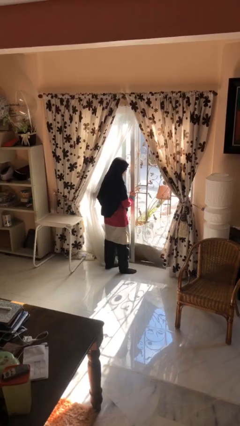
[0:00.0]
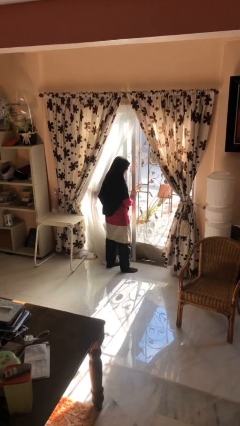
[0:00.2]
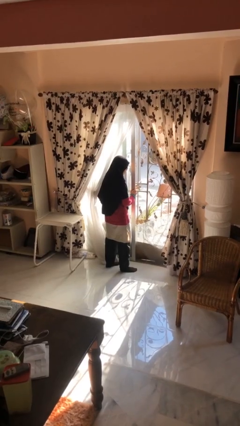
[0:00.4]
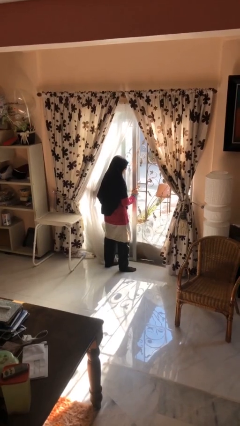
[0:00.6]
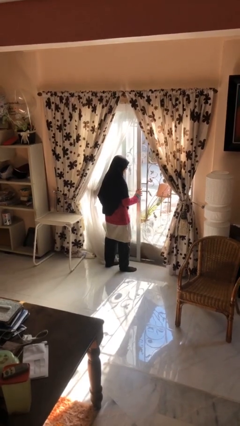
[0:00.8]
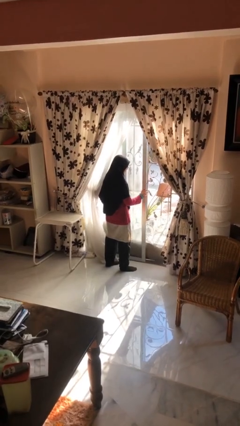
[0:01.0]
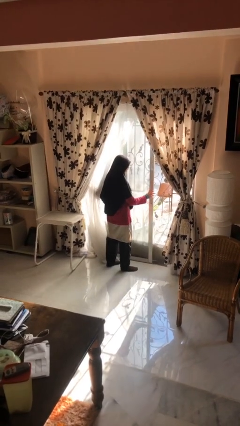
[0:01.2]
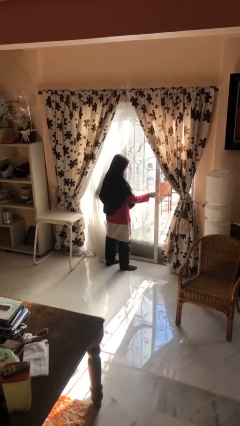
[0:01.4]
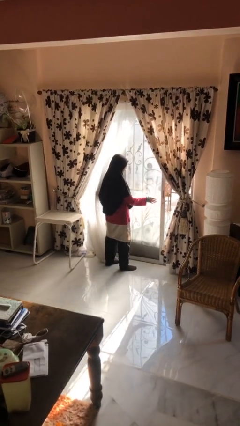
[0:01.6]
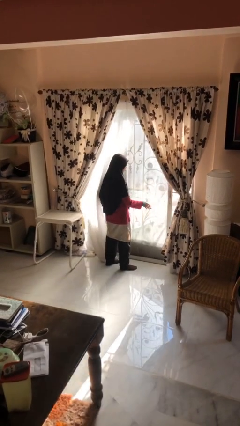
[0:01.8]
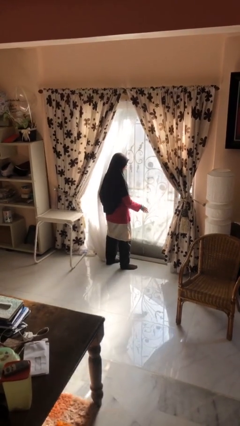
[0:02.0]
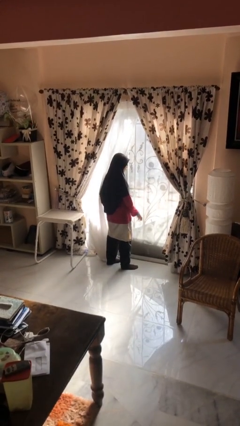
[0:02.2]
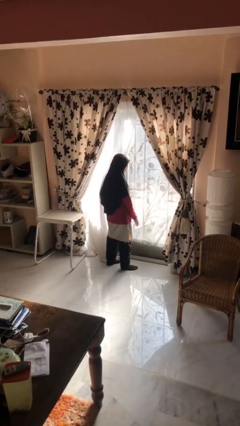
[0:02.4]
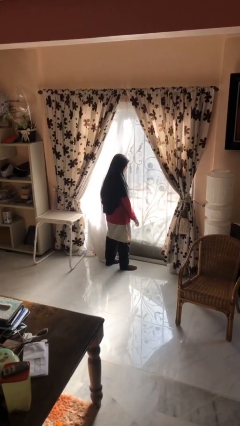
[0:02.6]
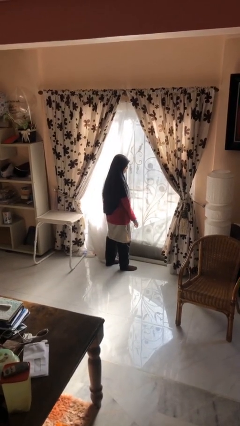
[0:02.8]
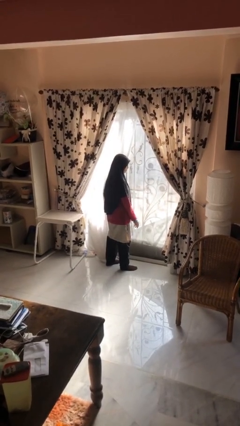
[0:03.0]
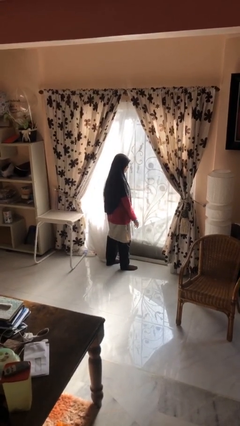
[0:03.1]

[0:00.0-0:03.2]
person closes sliding door

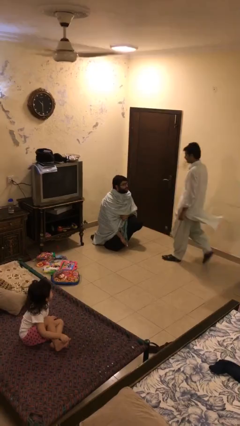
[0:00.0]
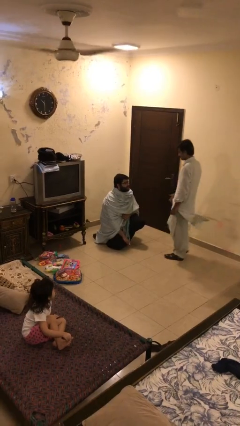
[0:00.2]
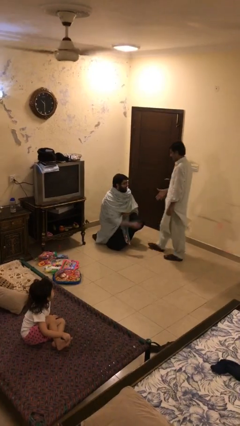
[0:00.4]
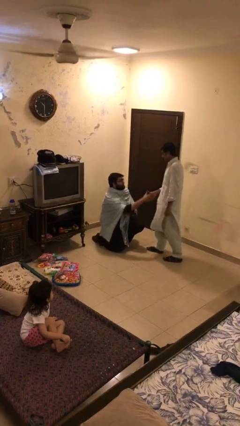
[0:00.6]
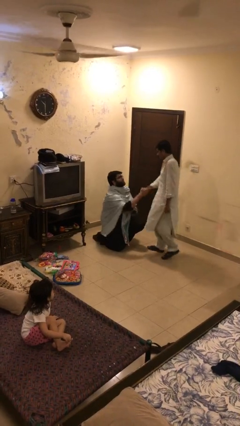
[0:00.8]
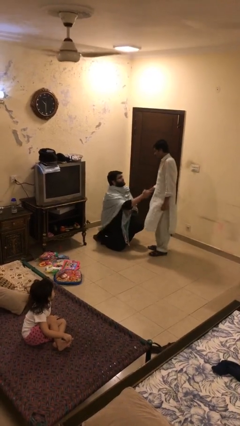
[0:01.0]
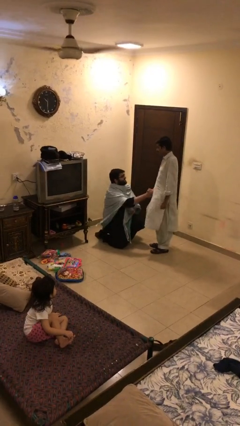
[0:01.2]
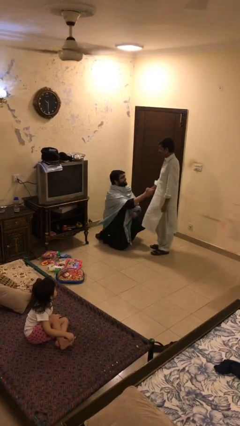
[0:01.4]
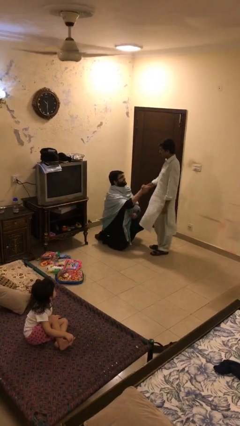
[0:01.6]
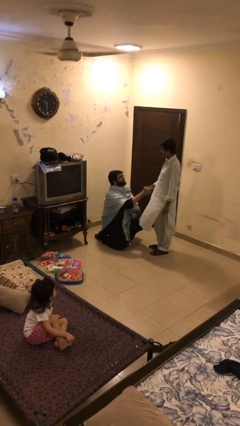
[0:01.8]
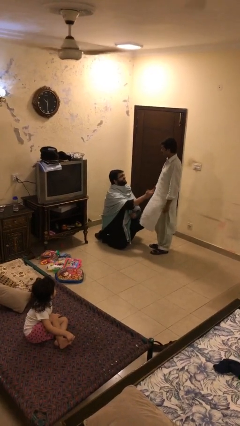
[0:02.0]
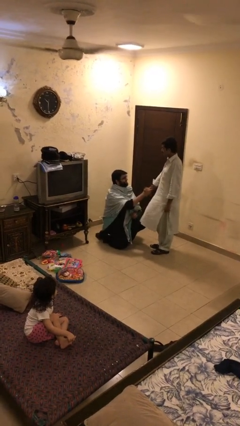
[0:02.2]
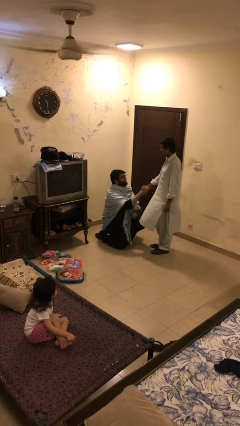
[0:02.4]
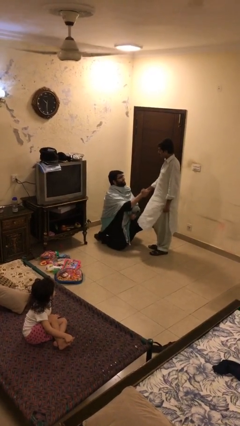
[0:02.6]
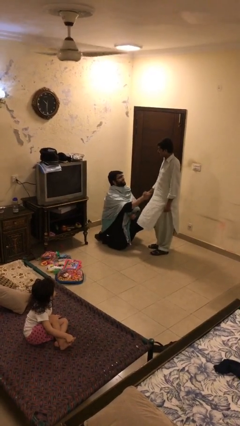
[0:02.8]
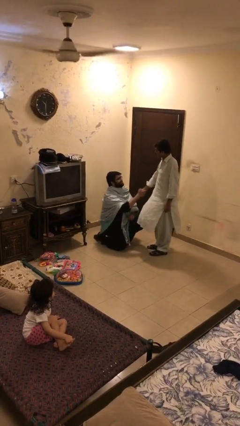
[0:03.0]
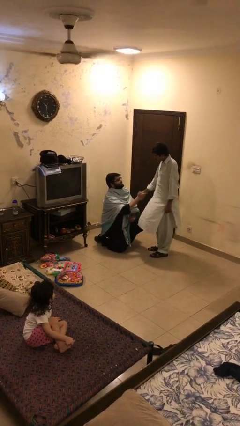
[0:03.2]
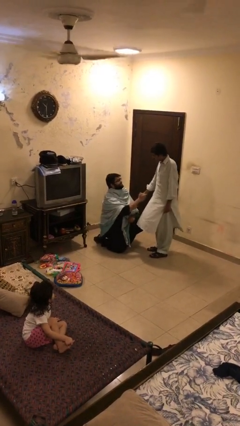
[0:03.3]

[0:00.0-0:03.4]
person shakes hand

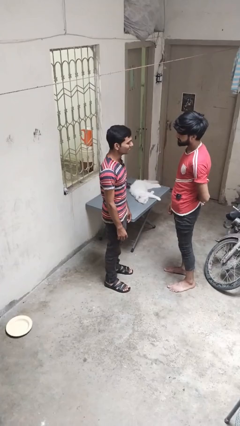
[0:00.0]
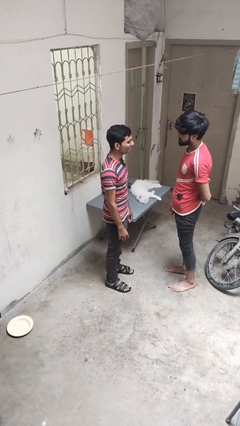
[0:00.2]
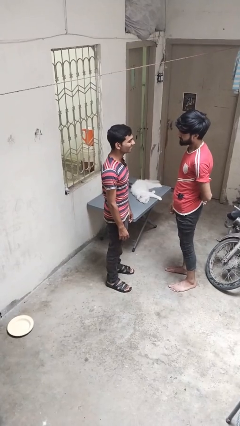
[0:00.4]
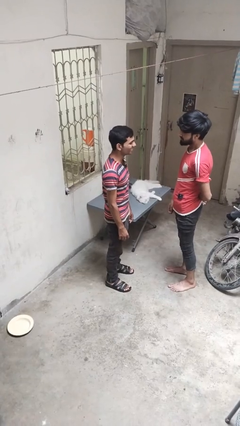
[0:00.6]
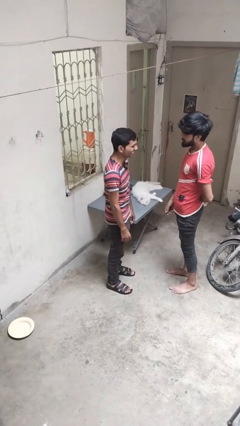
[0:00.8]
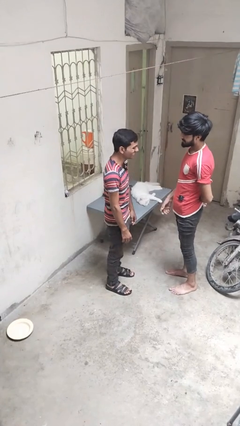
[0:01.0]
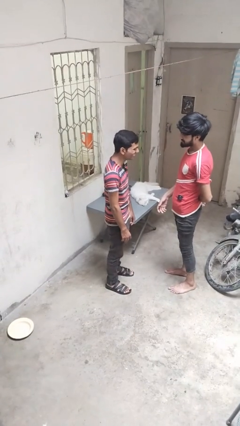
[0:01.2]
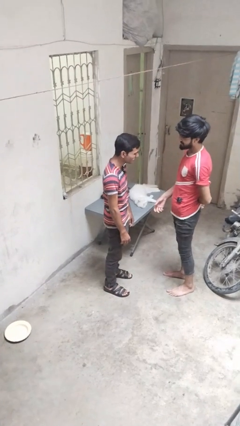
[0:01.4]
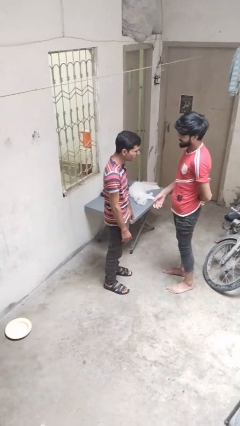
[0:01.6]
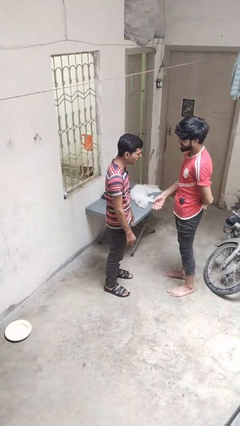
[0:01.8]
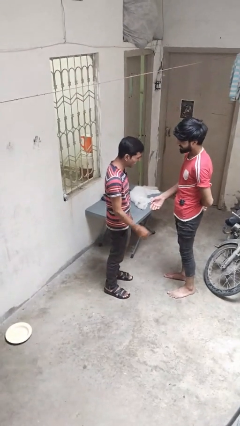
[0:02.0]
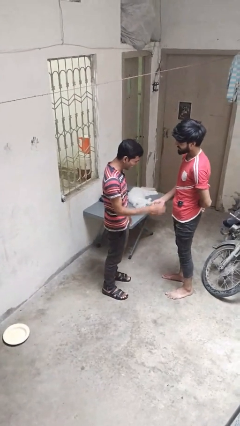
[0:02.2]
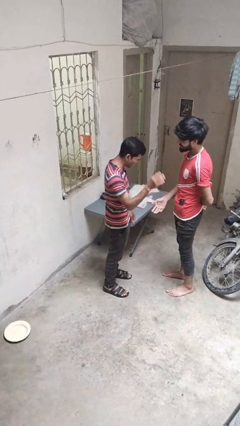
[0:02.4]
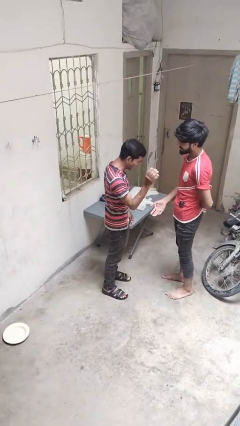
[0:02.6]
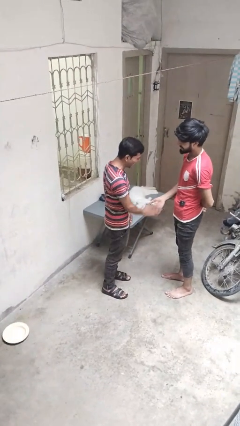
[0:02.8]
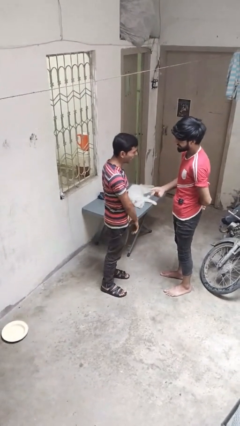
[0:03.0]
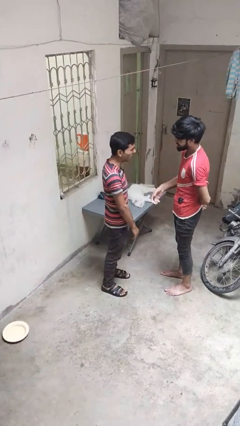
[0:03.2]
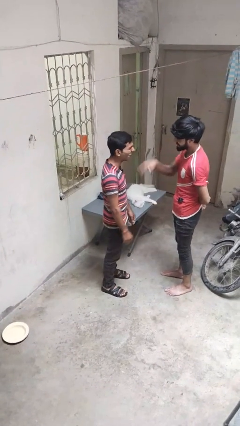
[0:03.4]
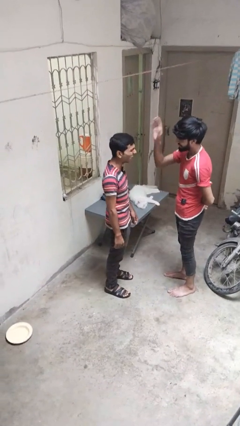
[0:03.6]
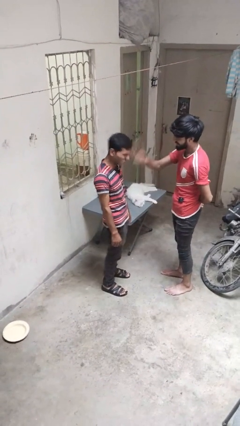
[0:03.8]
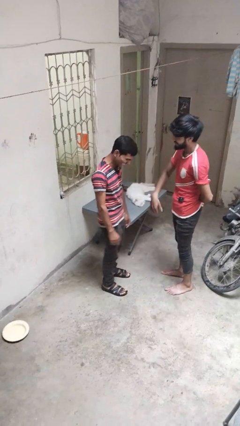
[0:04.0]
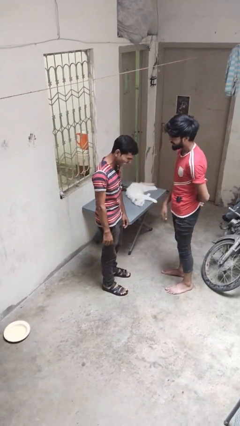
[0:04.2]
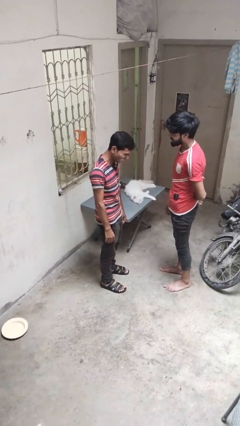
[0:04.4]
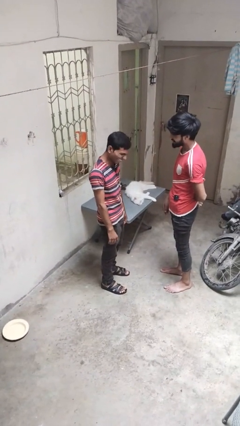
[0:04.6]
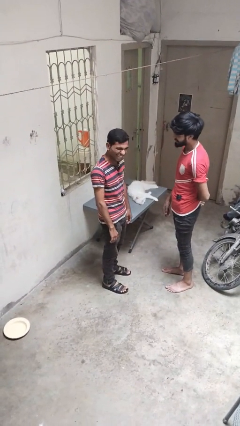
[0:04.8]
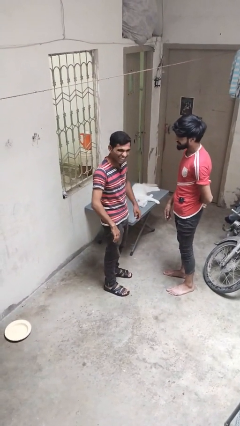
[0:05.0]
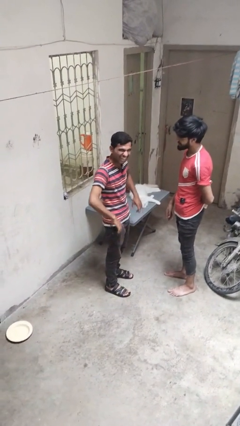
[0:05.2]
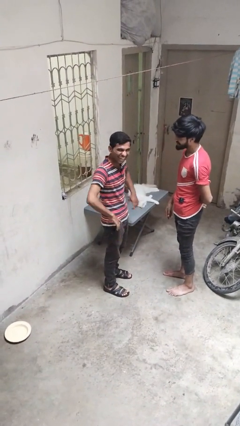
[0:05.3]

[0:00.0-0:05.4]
person laughs with person

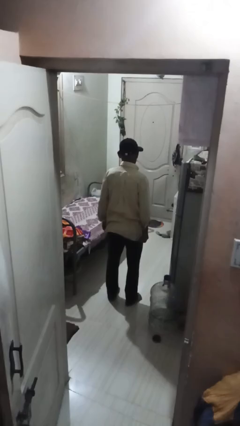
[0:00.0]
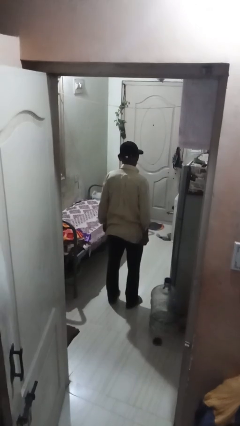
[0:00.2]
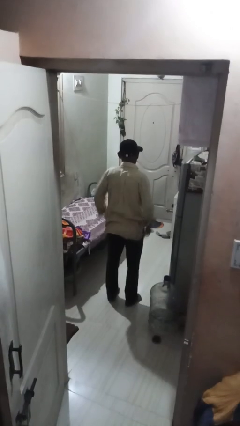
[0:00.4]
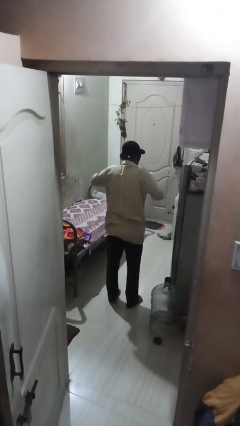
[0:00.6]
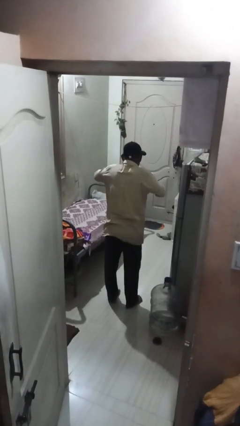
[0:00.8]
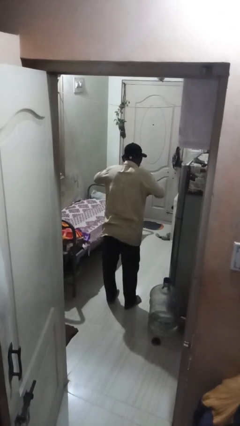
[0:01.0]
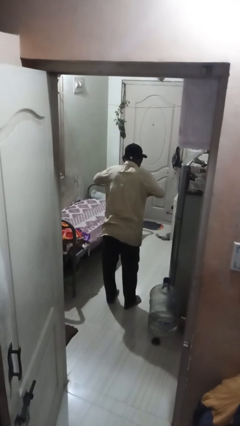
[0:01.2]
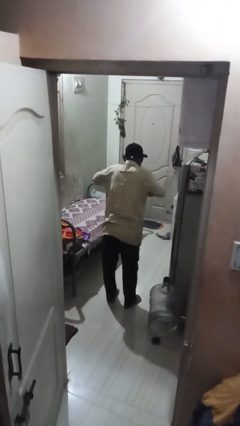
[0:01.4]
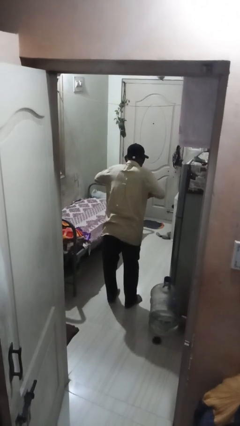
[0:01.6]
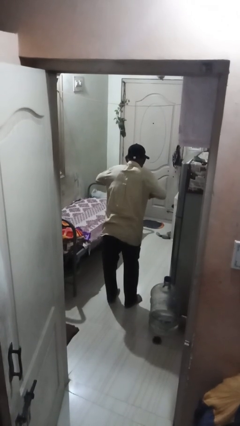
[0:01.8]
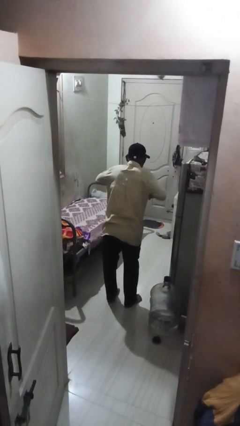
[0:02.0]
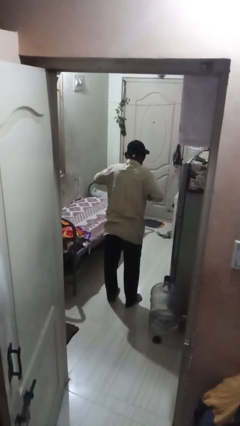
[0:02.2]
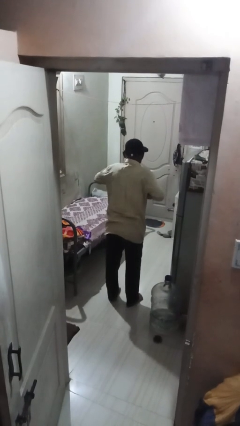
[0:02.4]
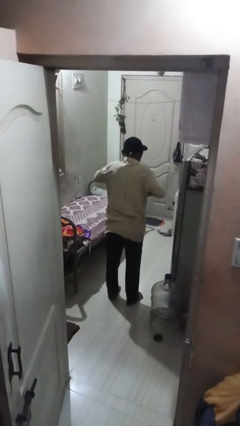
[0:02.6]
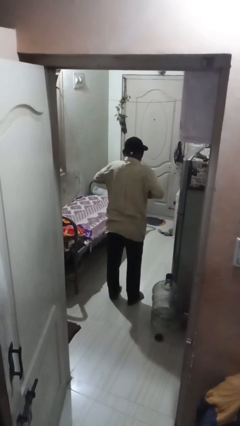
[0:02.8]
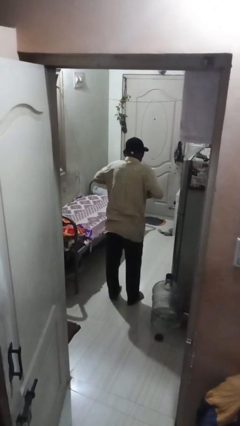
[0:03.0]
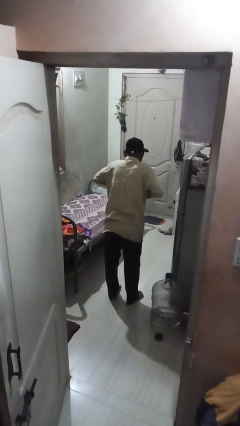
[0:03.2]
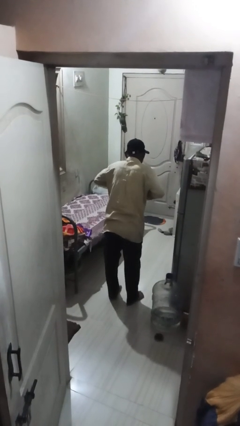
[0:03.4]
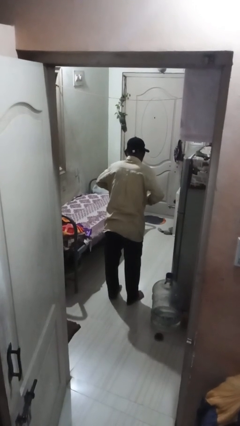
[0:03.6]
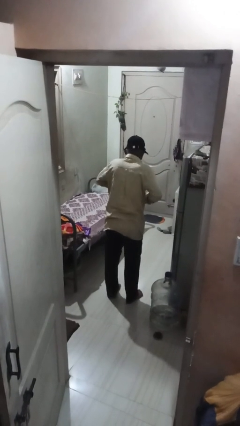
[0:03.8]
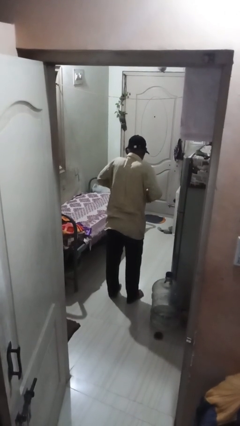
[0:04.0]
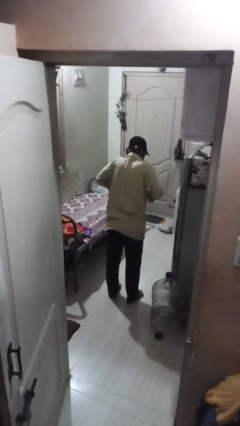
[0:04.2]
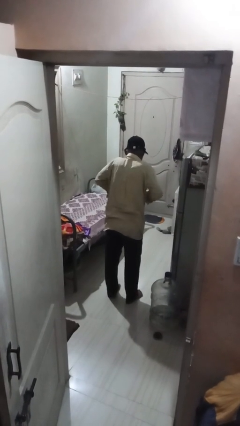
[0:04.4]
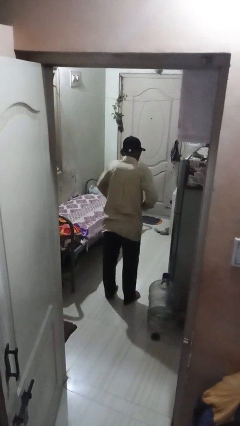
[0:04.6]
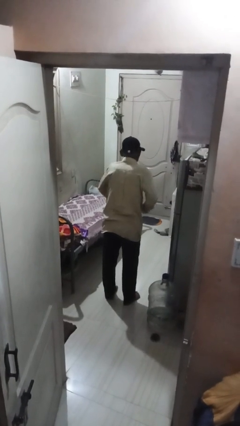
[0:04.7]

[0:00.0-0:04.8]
person unbuttons shirt

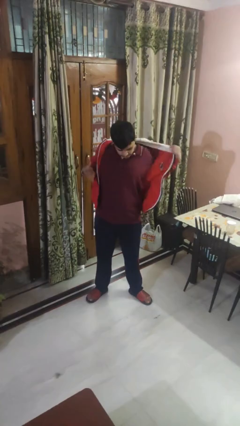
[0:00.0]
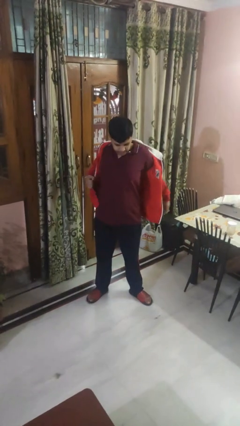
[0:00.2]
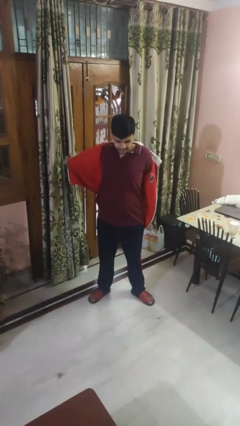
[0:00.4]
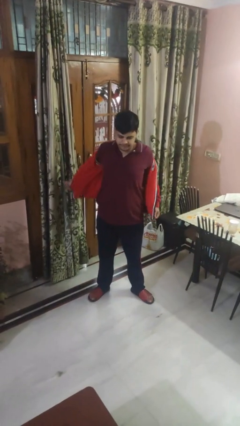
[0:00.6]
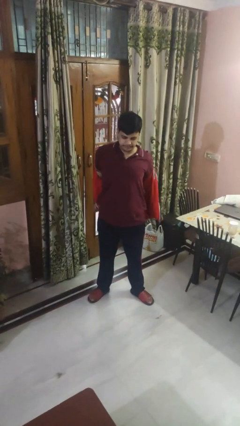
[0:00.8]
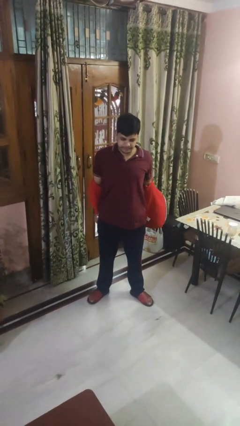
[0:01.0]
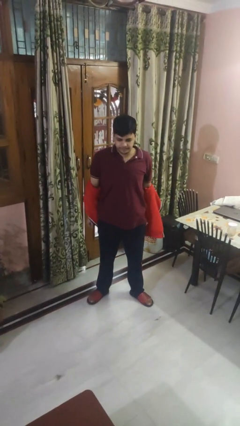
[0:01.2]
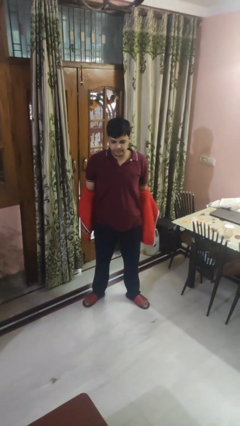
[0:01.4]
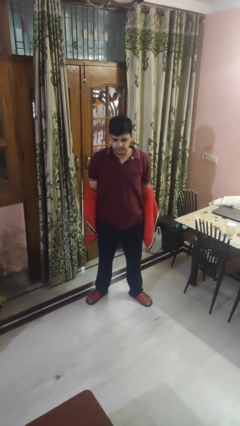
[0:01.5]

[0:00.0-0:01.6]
person takes off hoodie
